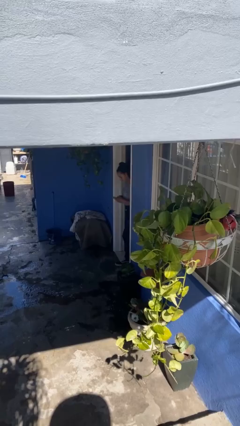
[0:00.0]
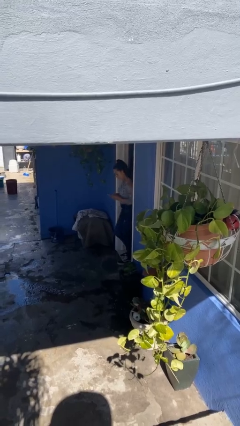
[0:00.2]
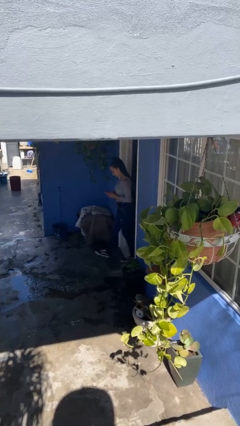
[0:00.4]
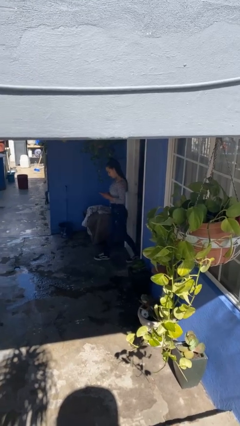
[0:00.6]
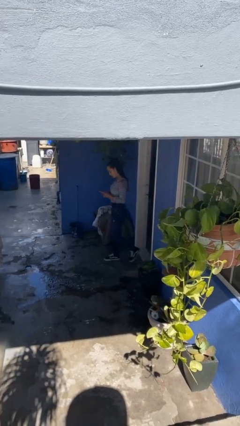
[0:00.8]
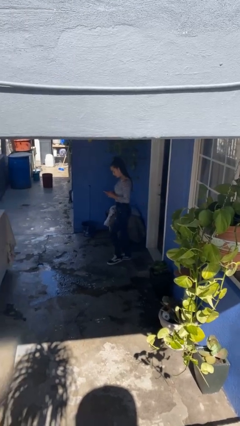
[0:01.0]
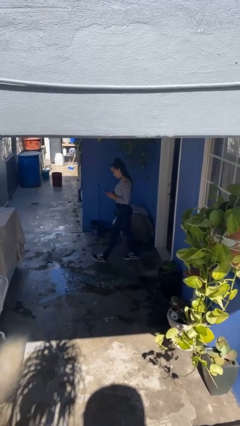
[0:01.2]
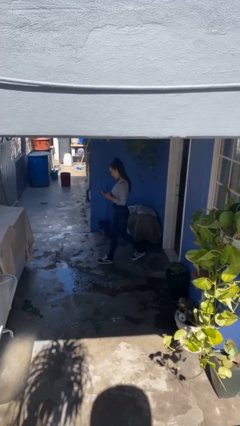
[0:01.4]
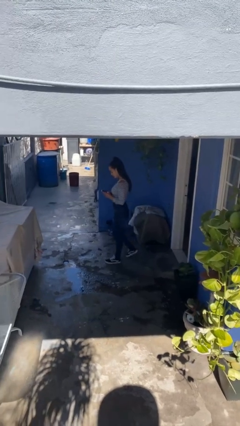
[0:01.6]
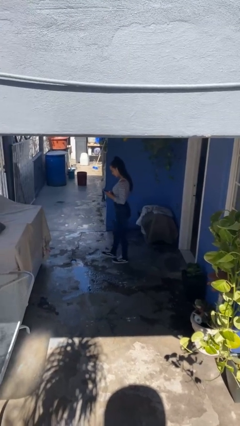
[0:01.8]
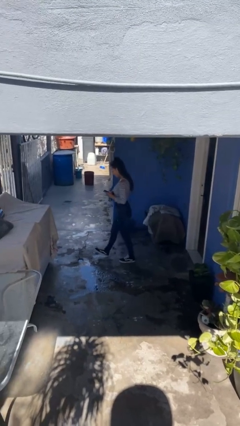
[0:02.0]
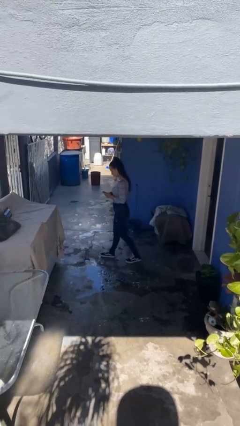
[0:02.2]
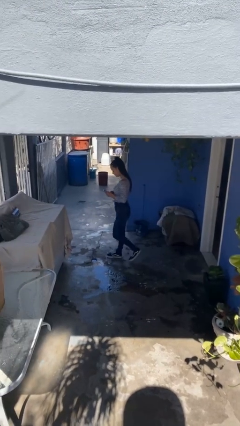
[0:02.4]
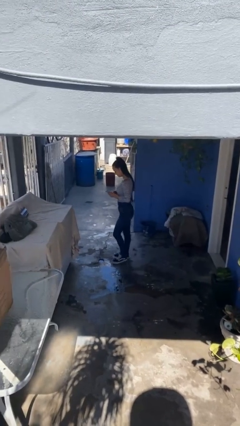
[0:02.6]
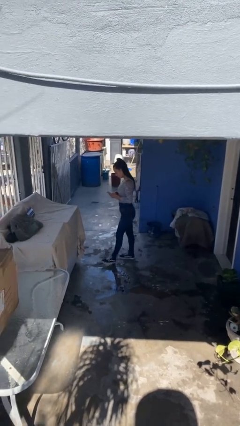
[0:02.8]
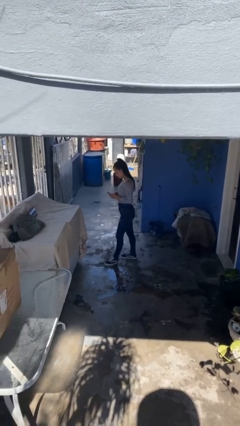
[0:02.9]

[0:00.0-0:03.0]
person enters scene through structure

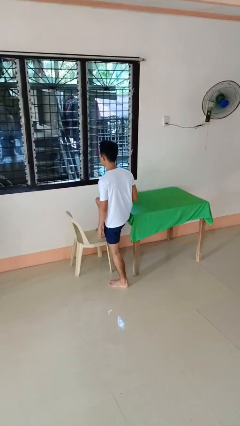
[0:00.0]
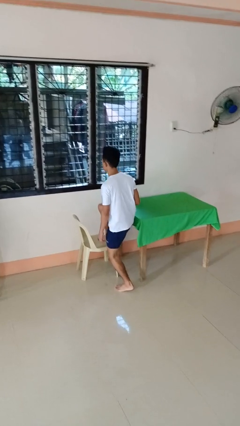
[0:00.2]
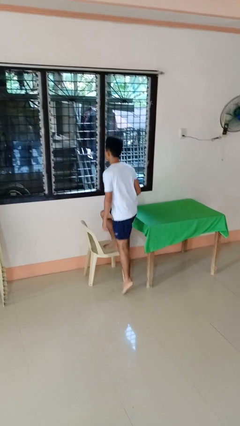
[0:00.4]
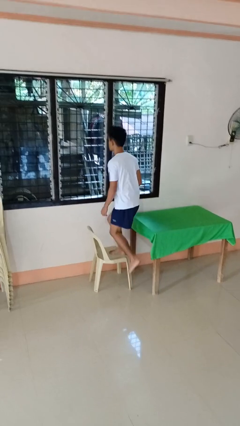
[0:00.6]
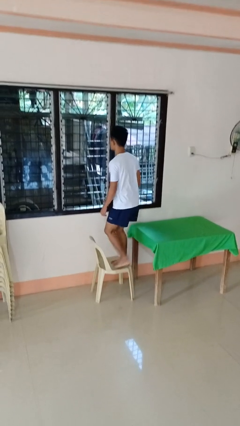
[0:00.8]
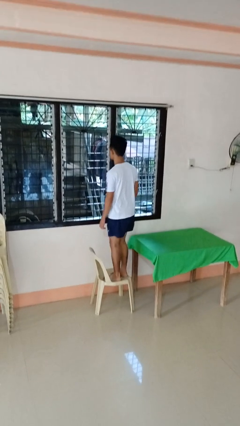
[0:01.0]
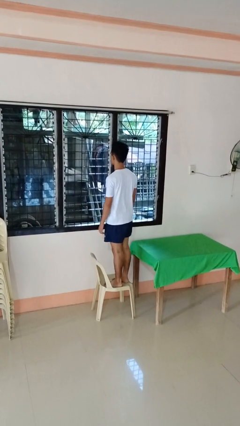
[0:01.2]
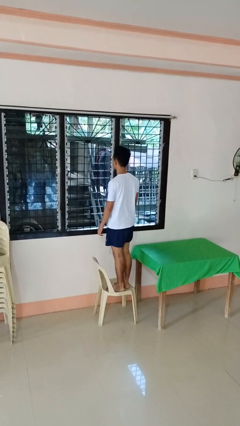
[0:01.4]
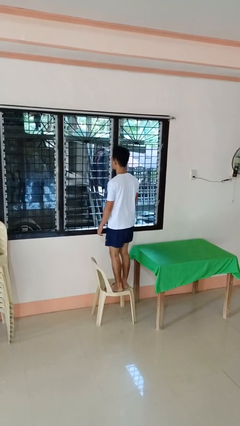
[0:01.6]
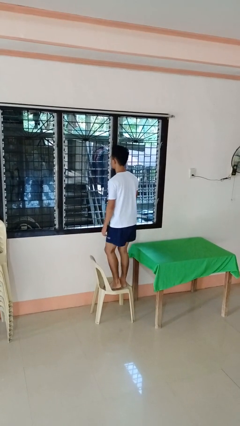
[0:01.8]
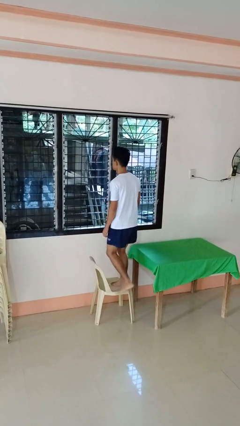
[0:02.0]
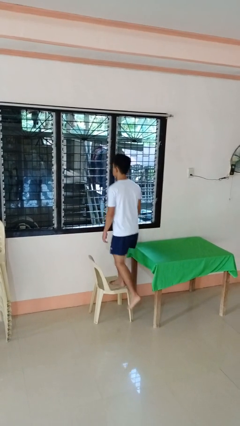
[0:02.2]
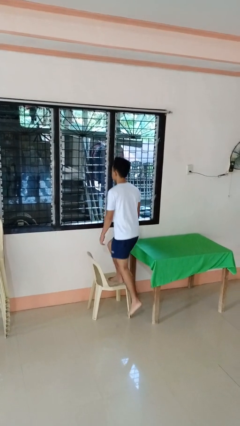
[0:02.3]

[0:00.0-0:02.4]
person climbs on chair

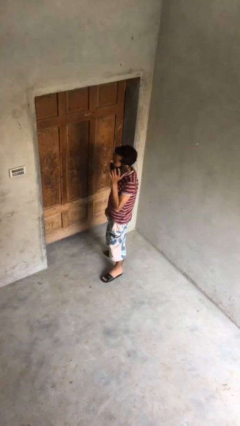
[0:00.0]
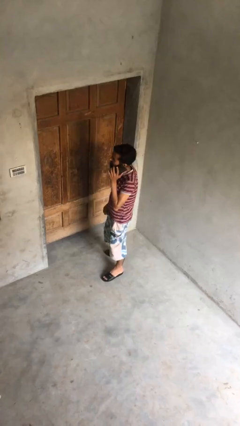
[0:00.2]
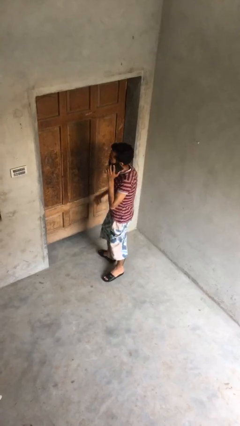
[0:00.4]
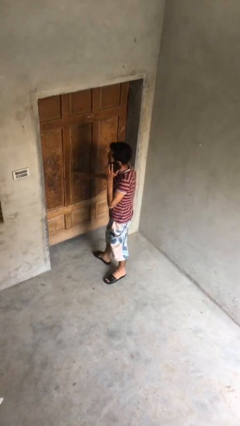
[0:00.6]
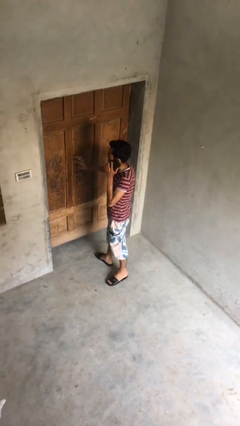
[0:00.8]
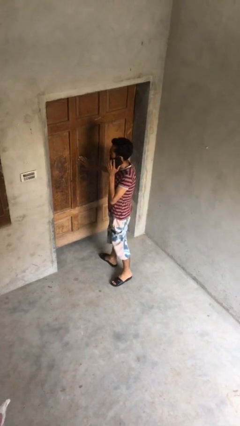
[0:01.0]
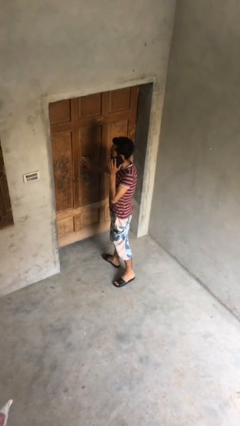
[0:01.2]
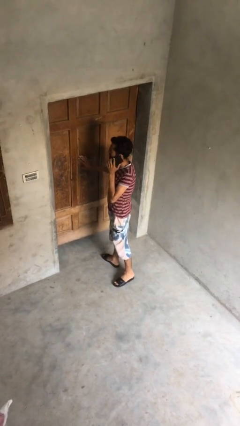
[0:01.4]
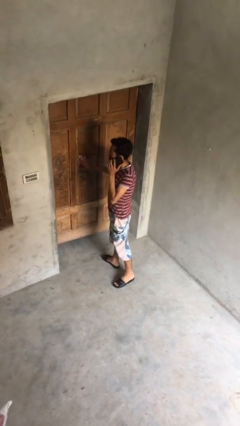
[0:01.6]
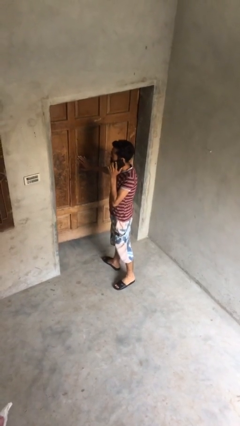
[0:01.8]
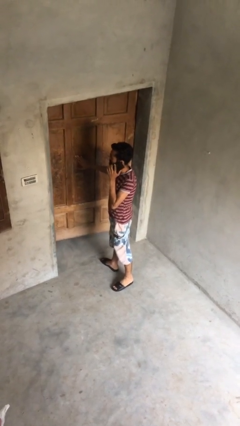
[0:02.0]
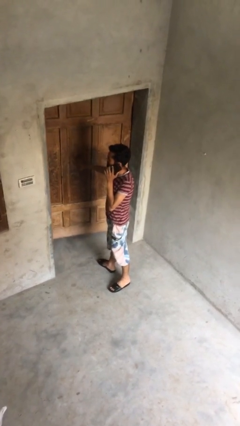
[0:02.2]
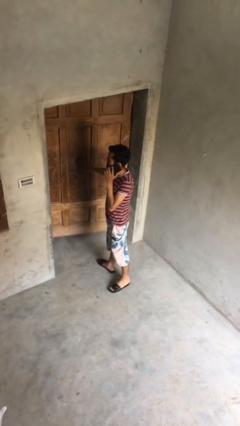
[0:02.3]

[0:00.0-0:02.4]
person opens facility door

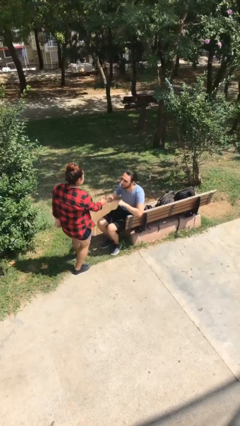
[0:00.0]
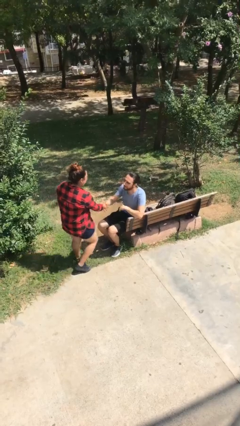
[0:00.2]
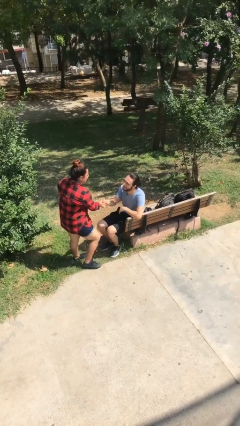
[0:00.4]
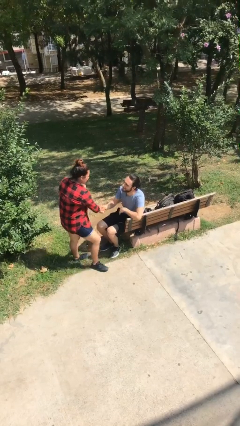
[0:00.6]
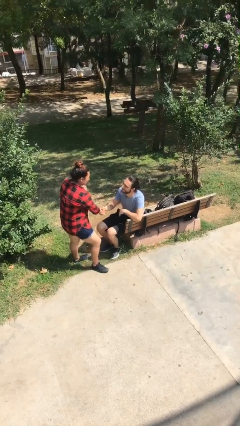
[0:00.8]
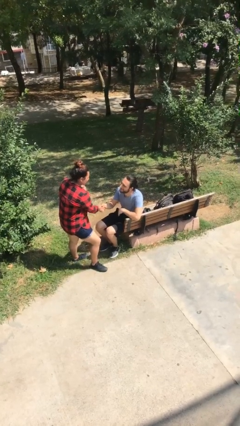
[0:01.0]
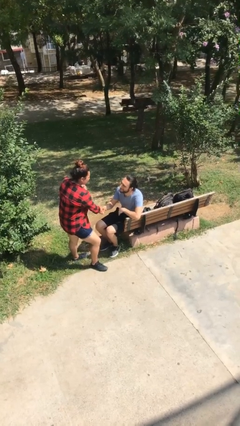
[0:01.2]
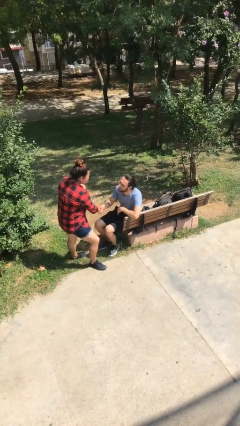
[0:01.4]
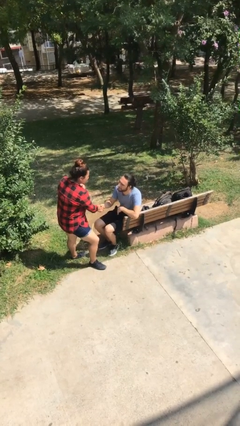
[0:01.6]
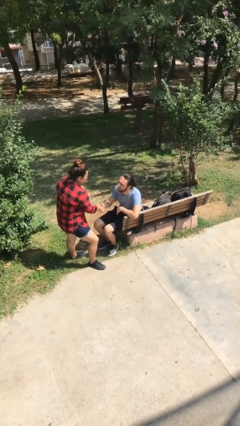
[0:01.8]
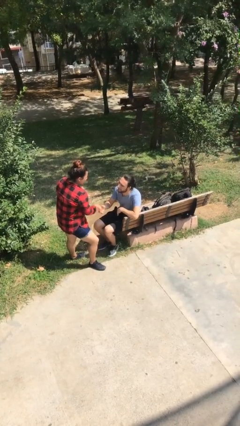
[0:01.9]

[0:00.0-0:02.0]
person shakes hand

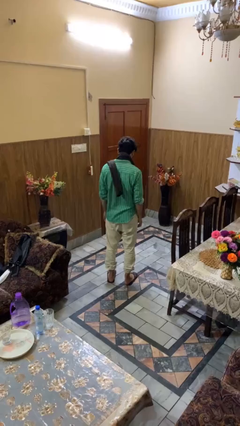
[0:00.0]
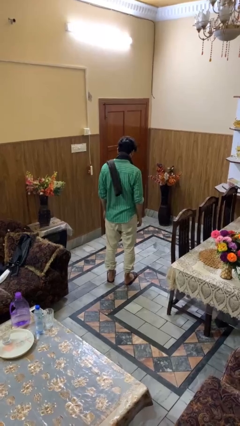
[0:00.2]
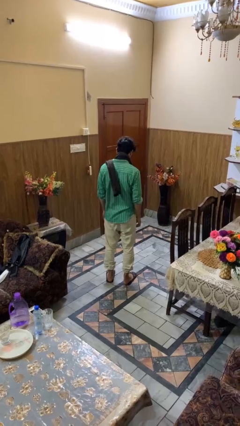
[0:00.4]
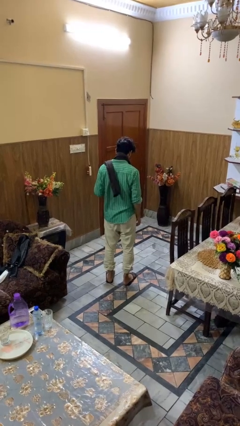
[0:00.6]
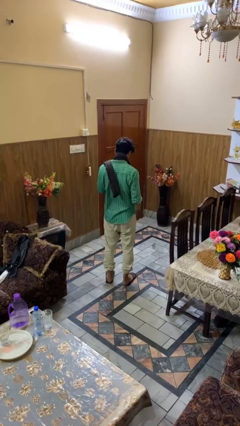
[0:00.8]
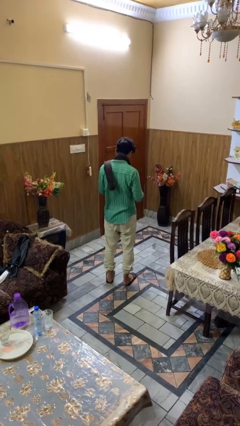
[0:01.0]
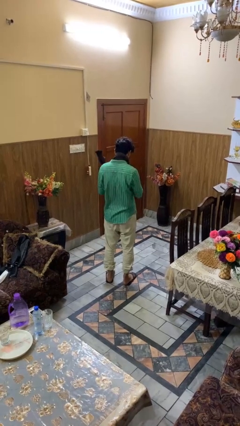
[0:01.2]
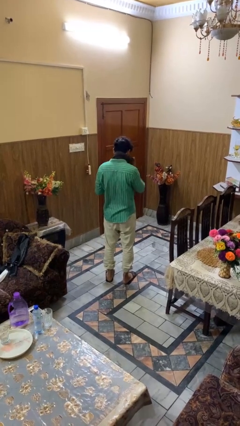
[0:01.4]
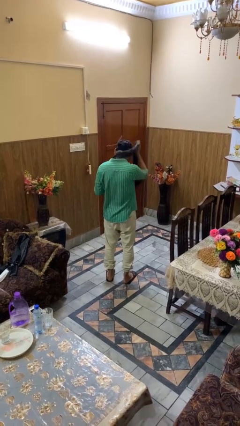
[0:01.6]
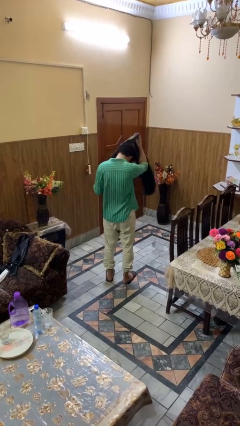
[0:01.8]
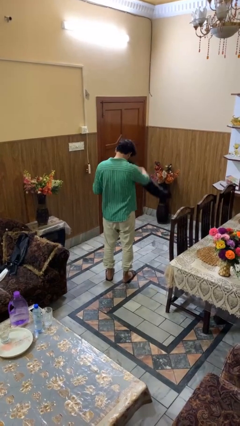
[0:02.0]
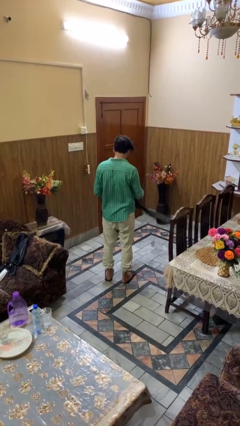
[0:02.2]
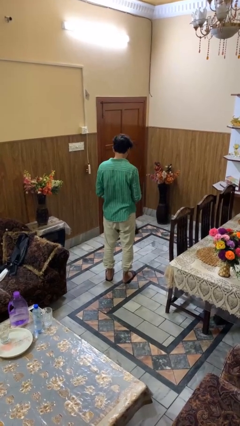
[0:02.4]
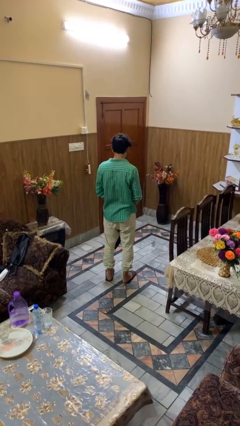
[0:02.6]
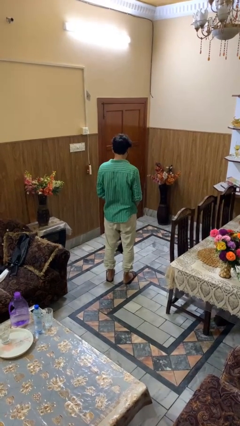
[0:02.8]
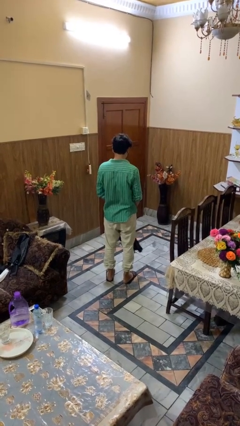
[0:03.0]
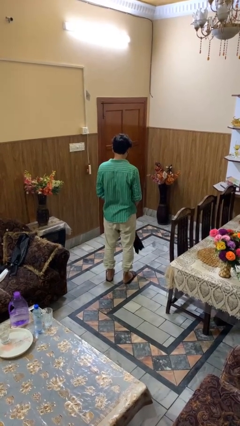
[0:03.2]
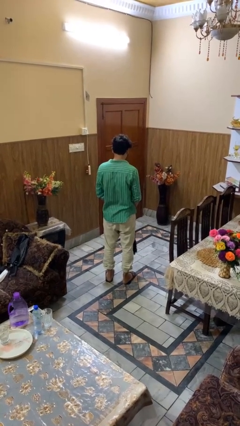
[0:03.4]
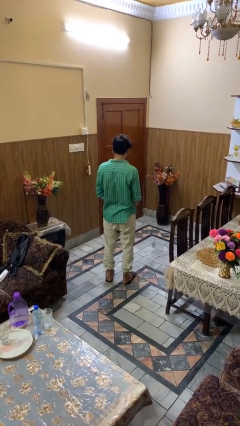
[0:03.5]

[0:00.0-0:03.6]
person takes off scarf

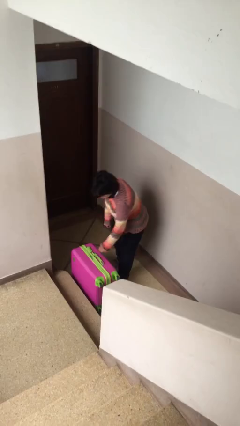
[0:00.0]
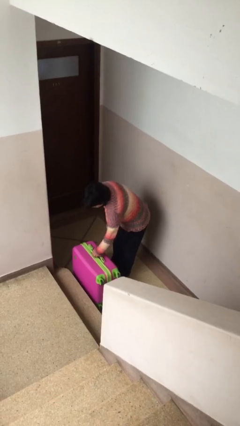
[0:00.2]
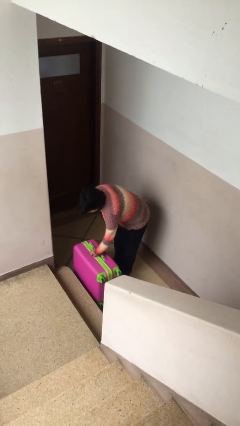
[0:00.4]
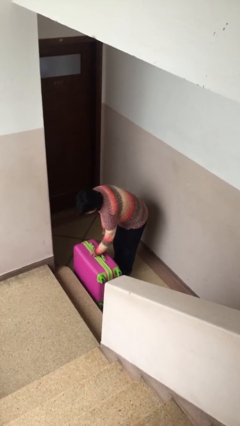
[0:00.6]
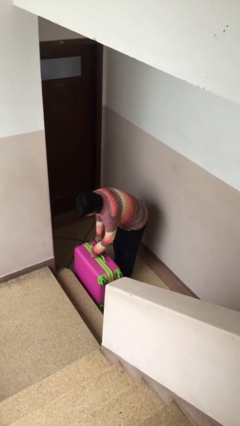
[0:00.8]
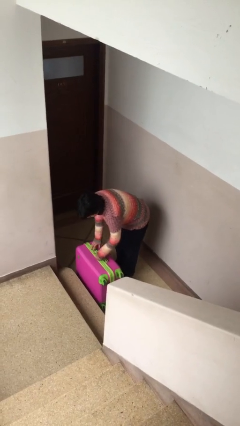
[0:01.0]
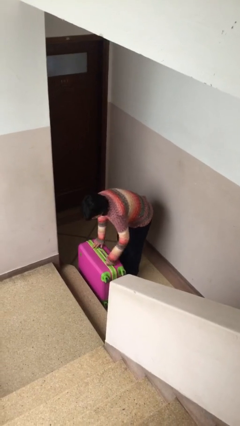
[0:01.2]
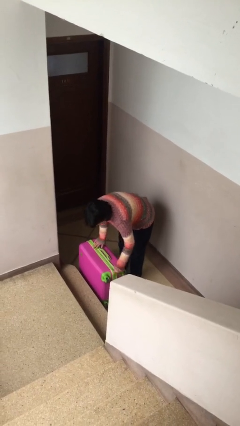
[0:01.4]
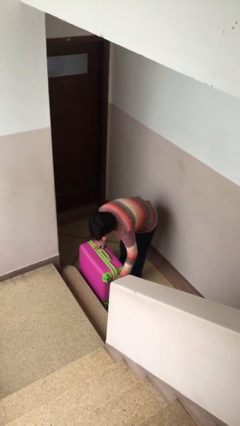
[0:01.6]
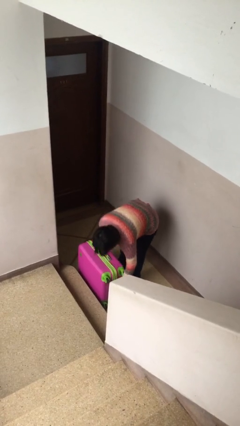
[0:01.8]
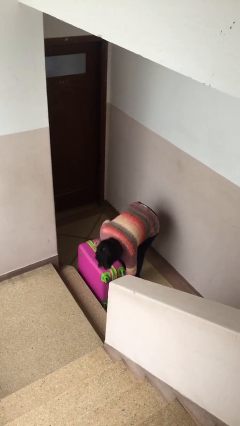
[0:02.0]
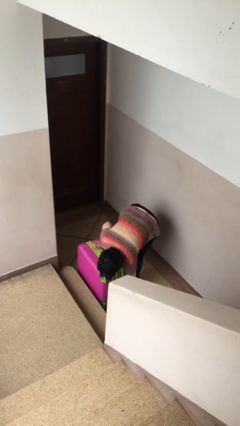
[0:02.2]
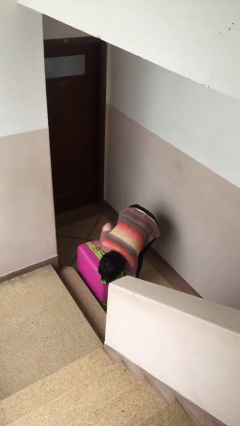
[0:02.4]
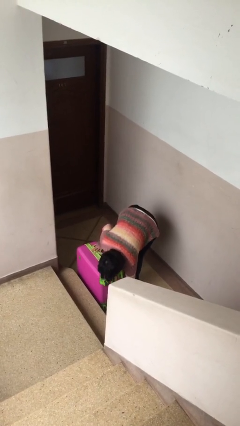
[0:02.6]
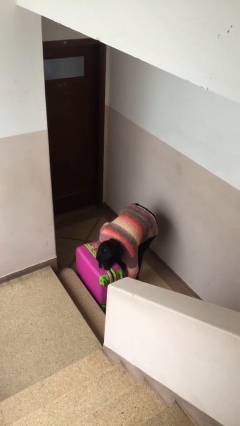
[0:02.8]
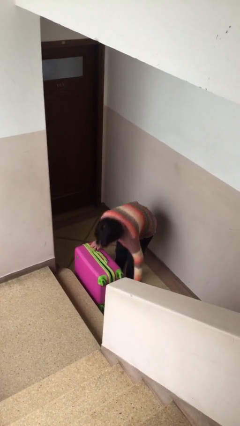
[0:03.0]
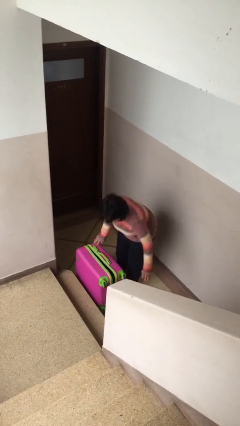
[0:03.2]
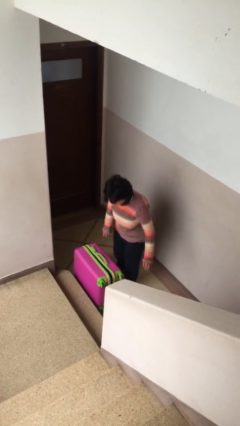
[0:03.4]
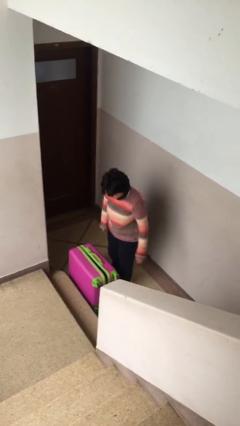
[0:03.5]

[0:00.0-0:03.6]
person opens suitcase
